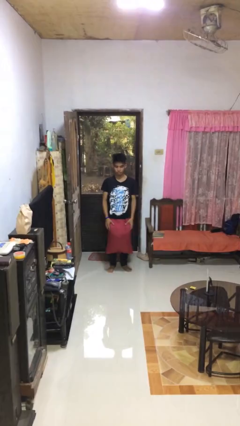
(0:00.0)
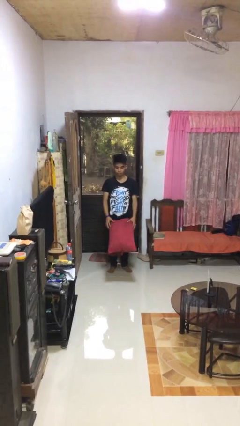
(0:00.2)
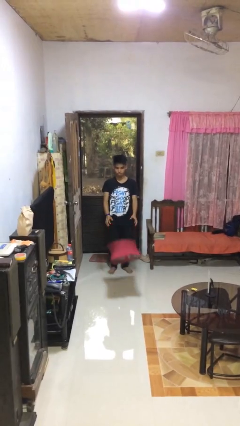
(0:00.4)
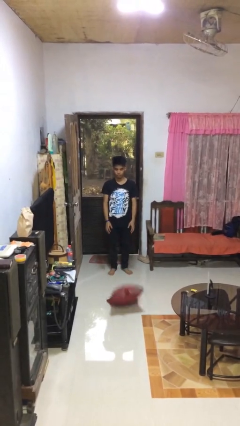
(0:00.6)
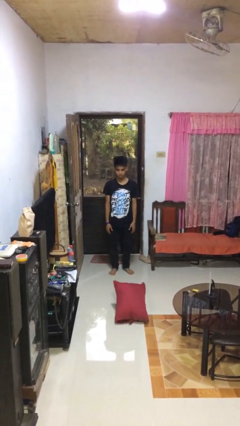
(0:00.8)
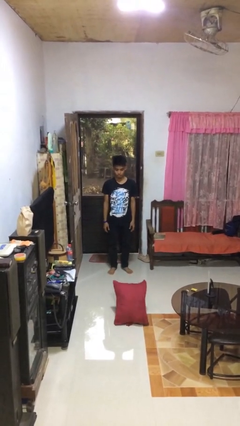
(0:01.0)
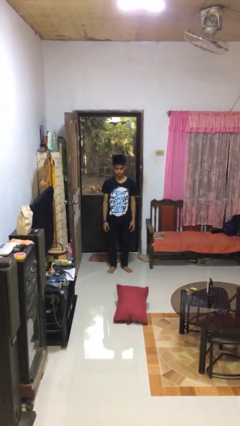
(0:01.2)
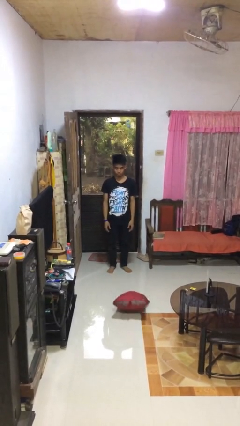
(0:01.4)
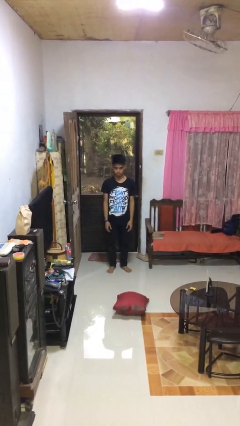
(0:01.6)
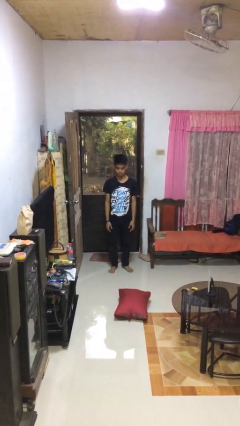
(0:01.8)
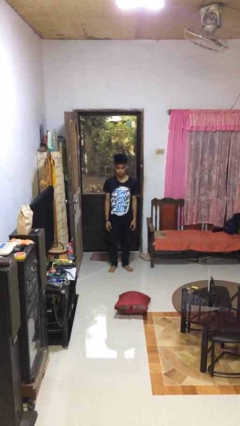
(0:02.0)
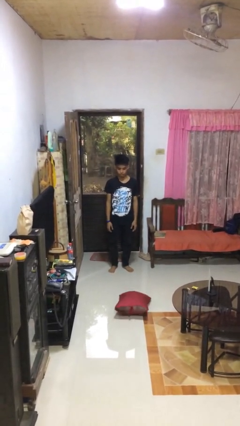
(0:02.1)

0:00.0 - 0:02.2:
person throws object to ground

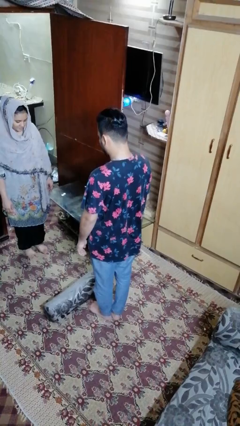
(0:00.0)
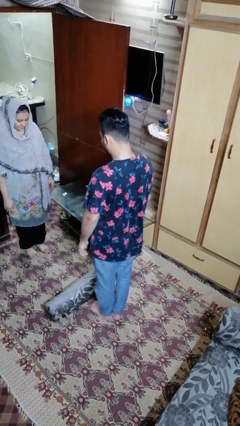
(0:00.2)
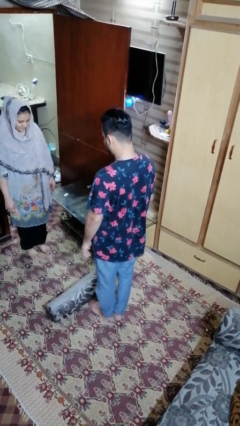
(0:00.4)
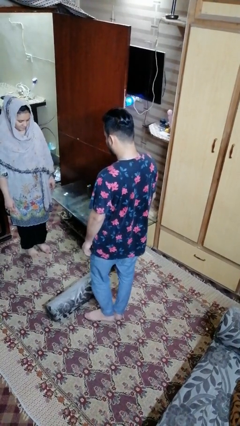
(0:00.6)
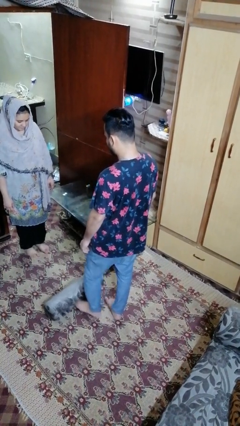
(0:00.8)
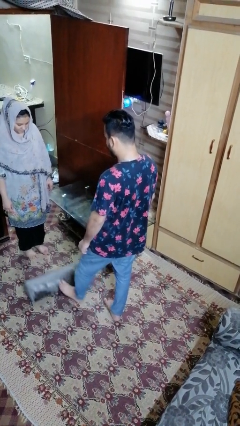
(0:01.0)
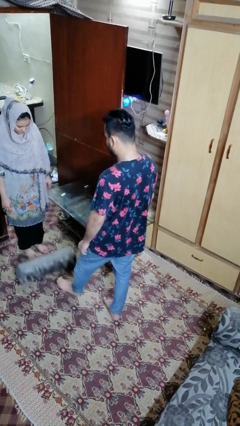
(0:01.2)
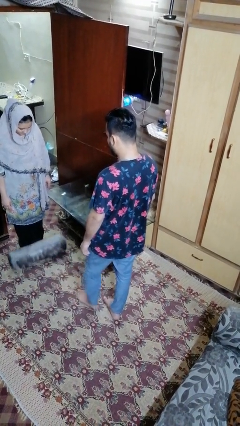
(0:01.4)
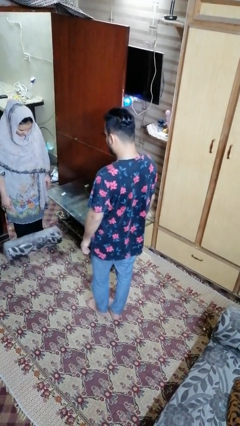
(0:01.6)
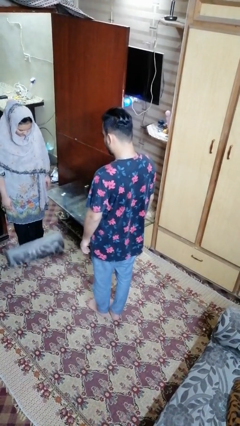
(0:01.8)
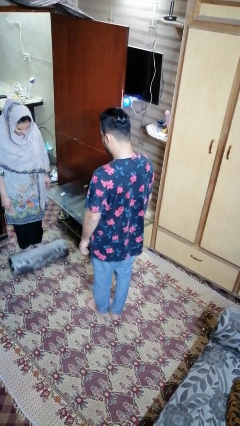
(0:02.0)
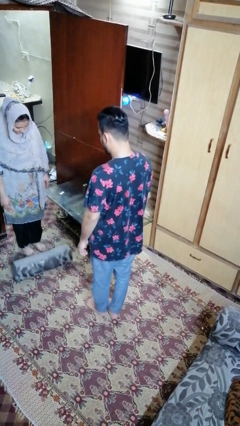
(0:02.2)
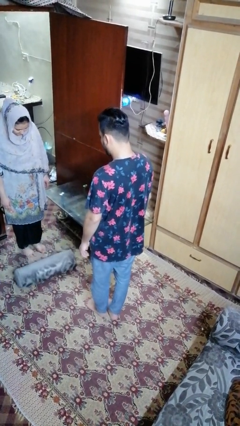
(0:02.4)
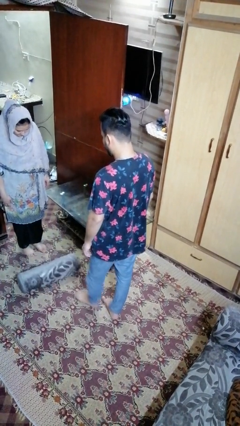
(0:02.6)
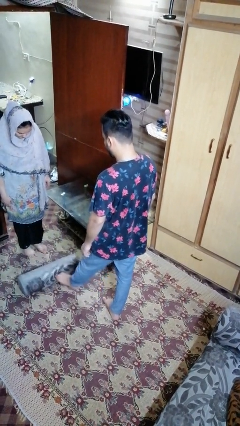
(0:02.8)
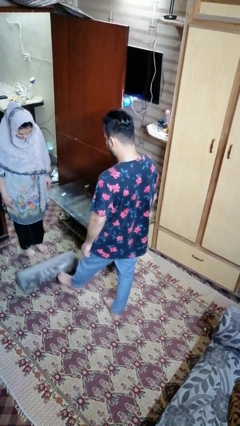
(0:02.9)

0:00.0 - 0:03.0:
person kicks object to person

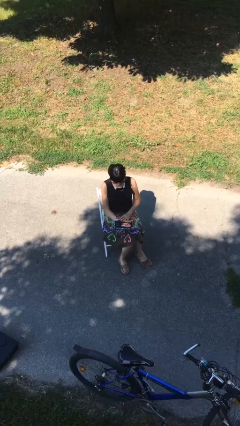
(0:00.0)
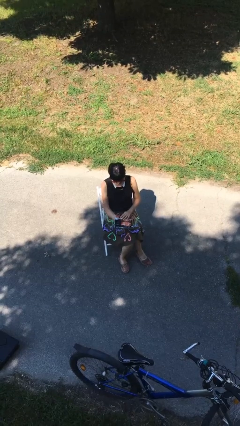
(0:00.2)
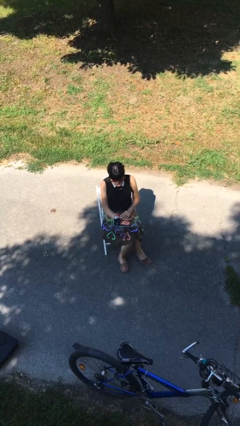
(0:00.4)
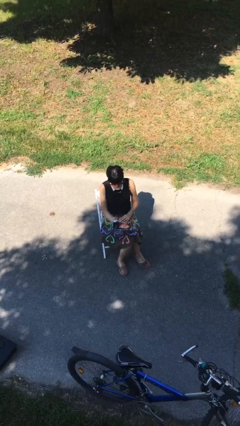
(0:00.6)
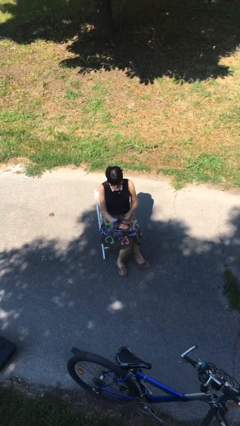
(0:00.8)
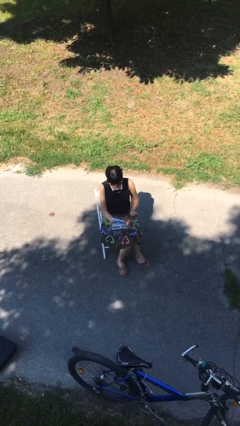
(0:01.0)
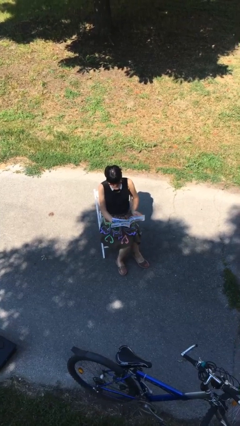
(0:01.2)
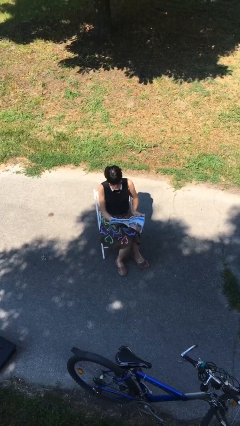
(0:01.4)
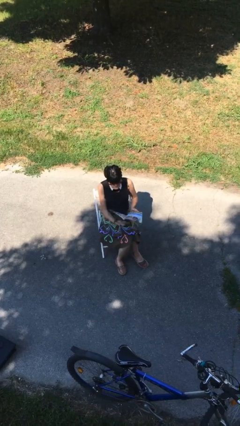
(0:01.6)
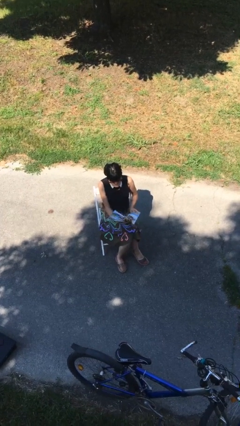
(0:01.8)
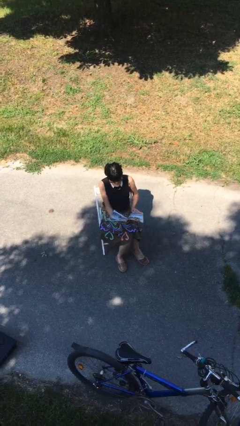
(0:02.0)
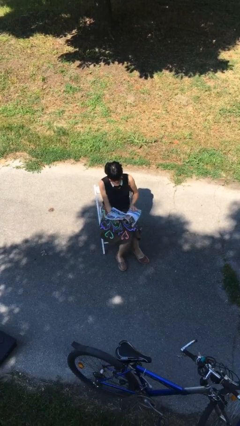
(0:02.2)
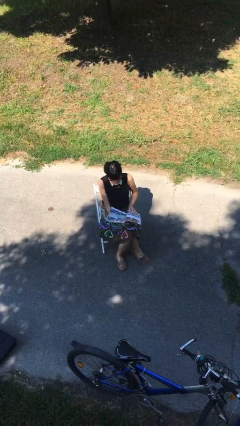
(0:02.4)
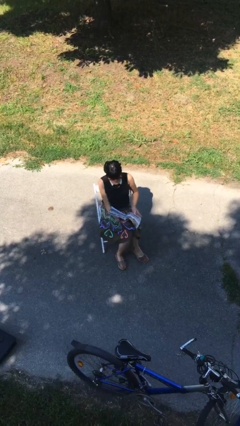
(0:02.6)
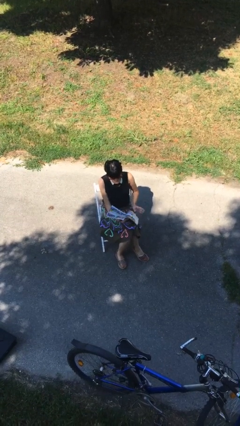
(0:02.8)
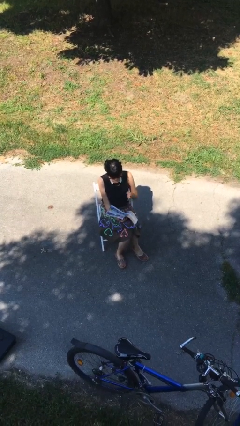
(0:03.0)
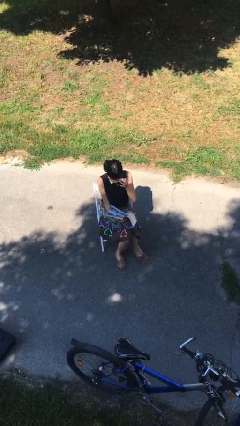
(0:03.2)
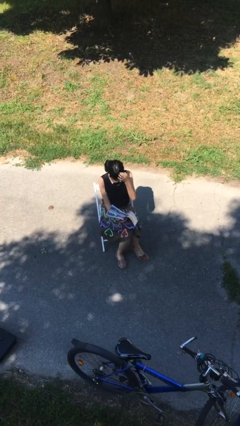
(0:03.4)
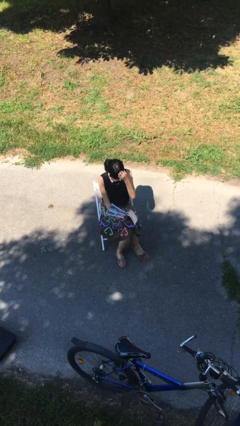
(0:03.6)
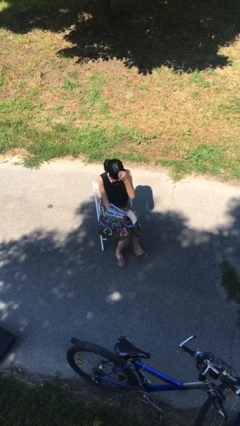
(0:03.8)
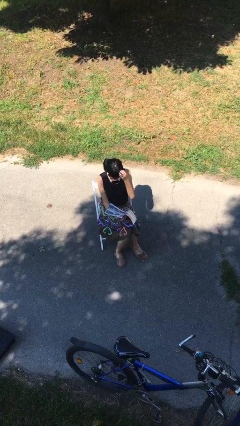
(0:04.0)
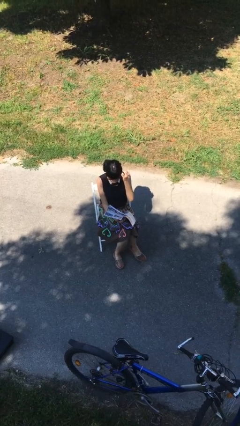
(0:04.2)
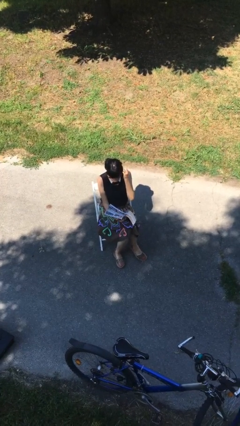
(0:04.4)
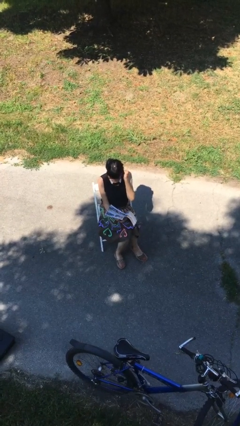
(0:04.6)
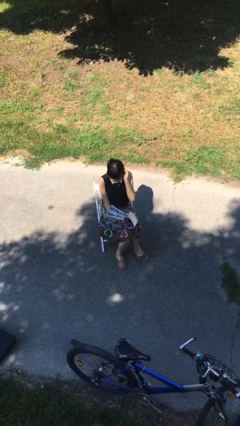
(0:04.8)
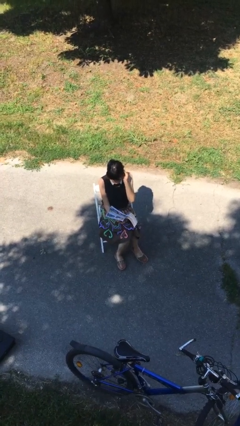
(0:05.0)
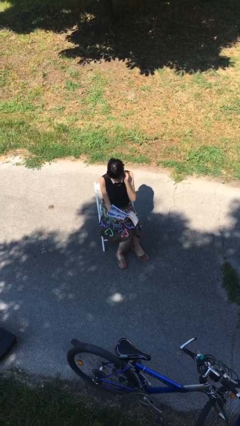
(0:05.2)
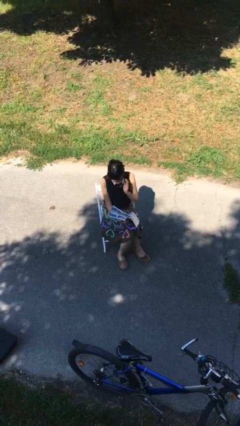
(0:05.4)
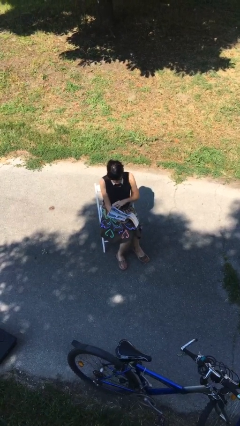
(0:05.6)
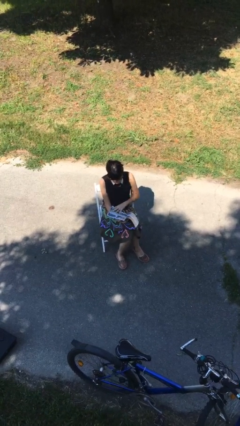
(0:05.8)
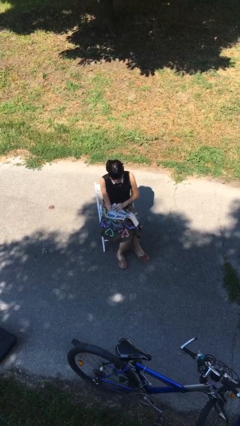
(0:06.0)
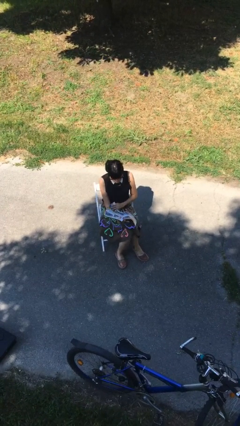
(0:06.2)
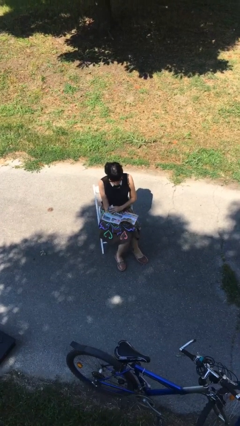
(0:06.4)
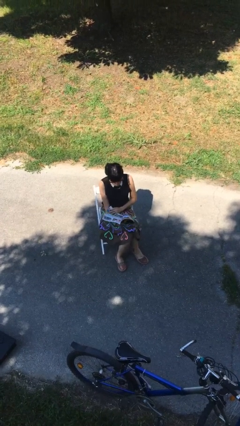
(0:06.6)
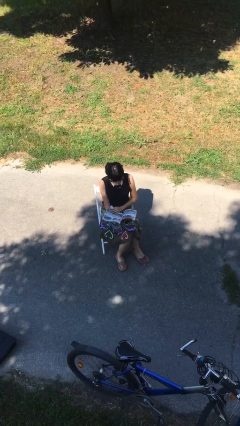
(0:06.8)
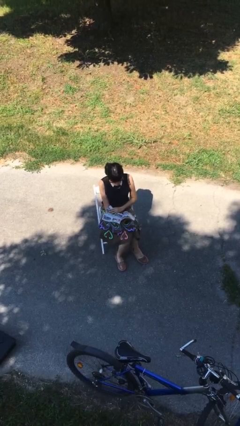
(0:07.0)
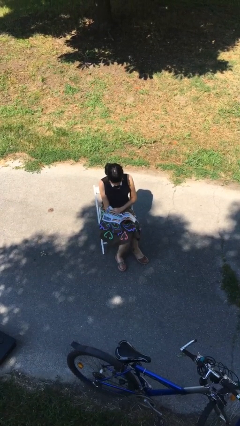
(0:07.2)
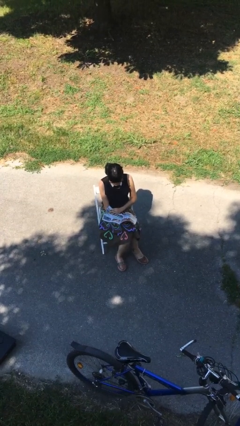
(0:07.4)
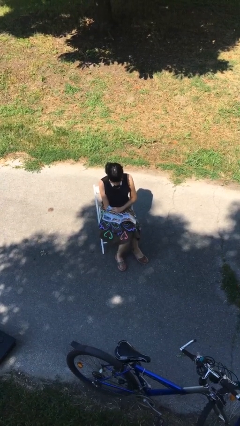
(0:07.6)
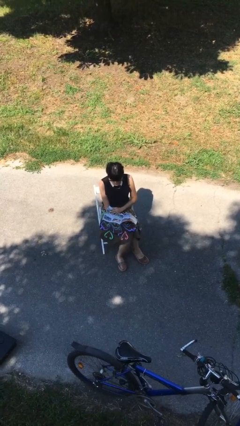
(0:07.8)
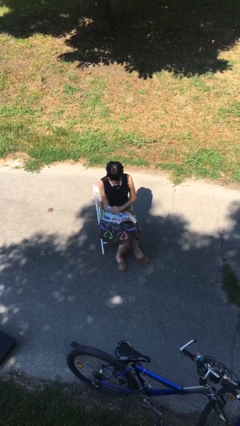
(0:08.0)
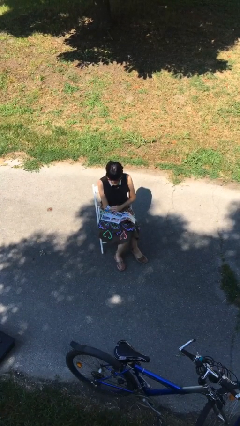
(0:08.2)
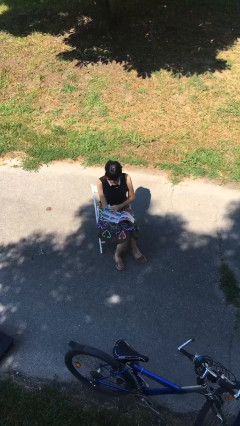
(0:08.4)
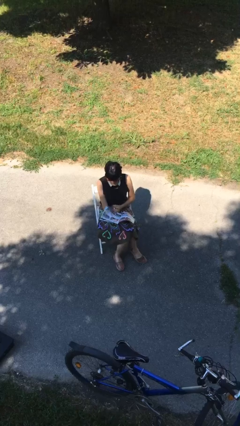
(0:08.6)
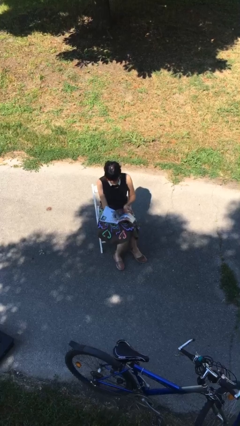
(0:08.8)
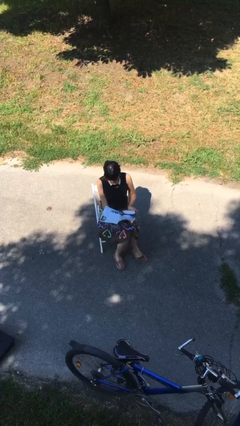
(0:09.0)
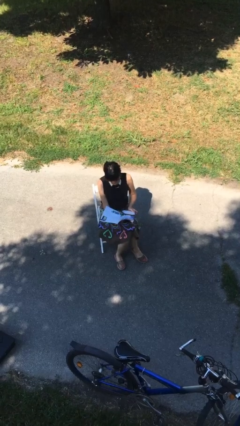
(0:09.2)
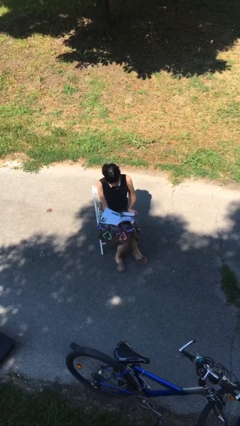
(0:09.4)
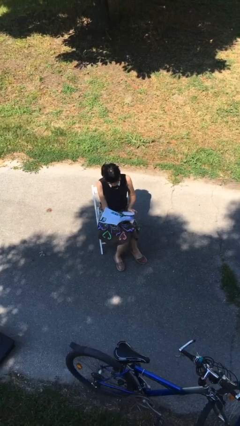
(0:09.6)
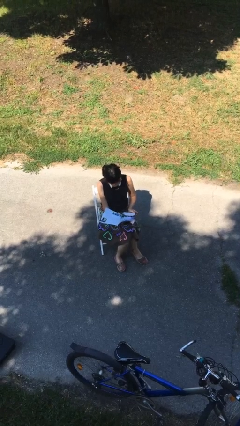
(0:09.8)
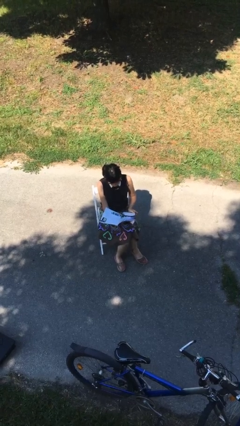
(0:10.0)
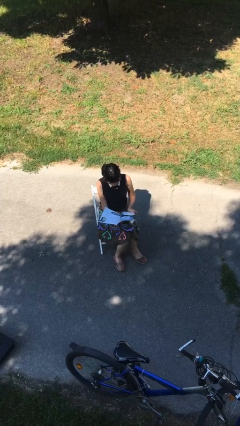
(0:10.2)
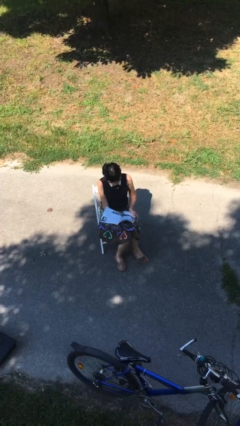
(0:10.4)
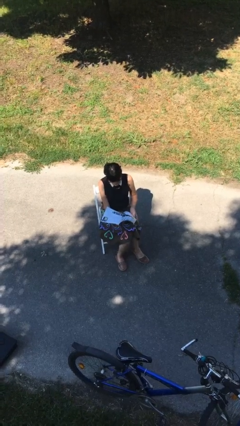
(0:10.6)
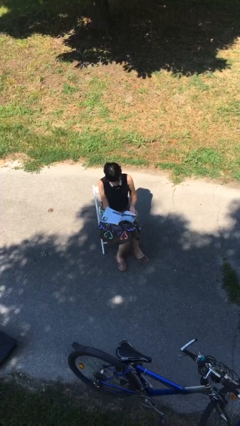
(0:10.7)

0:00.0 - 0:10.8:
person reads document

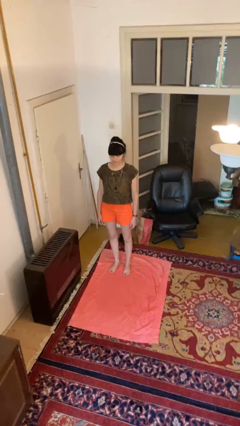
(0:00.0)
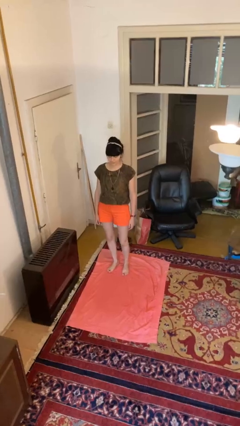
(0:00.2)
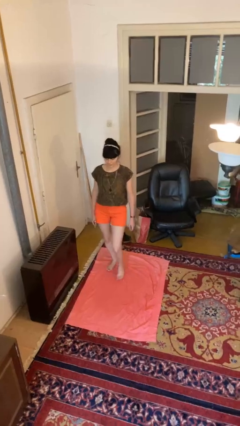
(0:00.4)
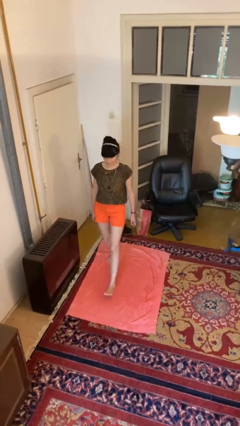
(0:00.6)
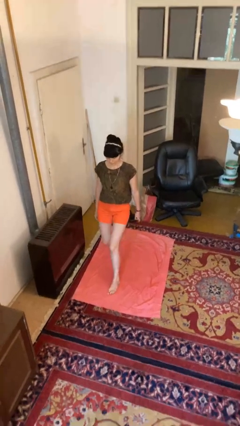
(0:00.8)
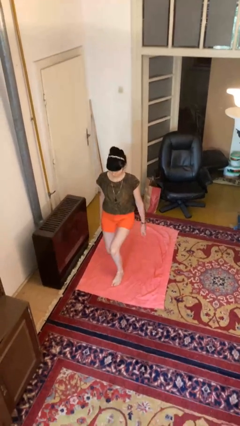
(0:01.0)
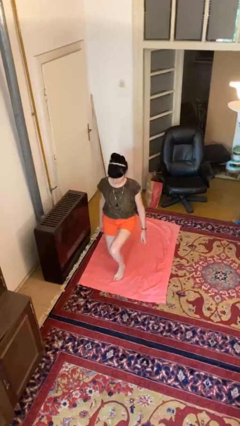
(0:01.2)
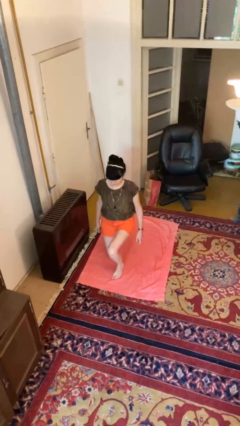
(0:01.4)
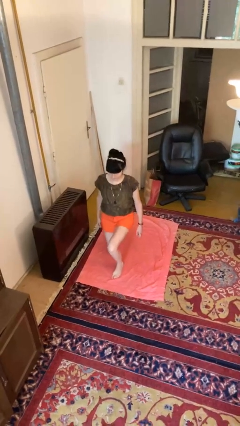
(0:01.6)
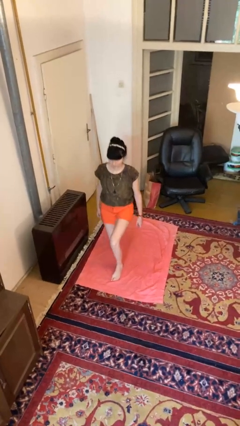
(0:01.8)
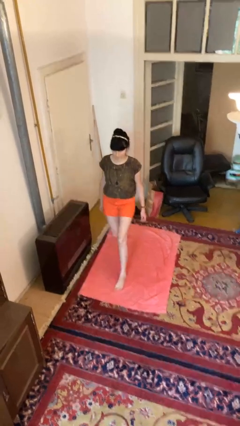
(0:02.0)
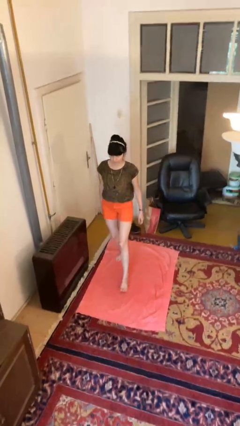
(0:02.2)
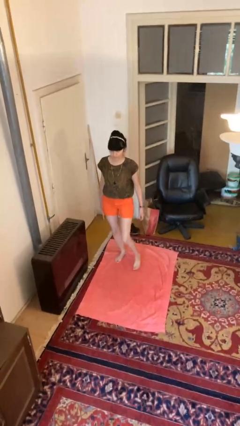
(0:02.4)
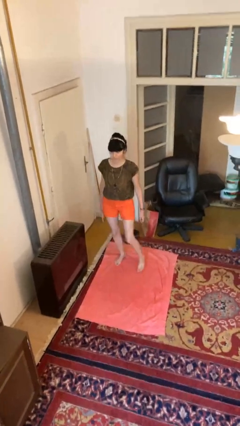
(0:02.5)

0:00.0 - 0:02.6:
person exercises with lunges
